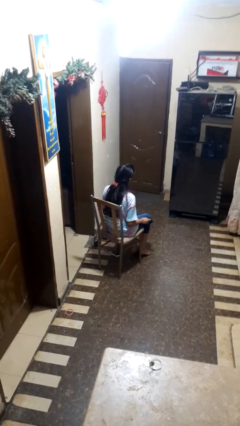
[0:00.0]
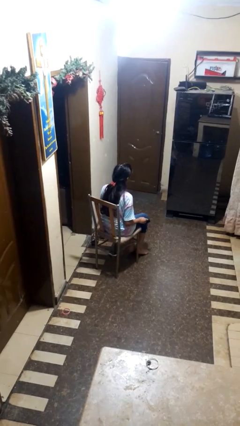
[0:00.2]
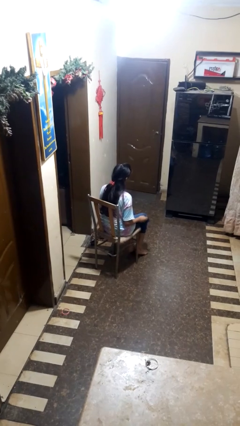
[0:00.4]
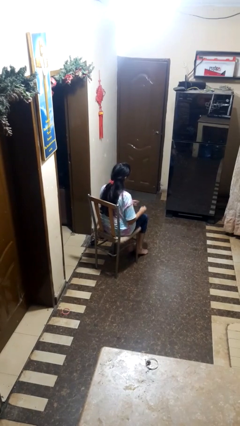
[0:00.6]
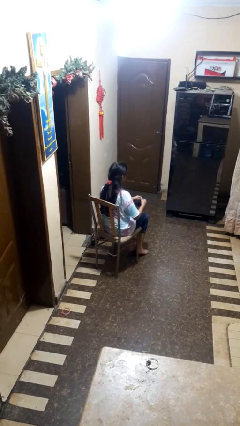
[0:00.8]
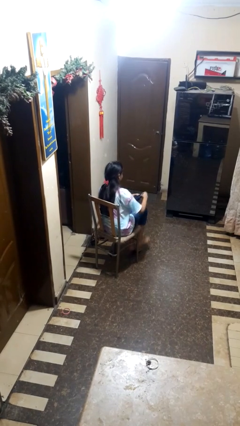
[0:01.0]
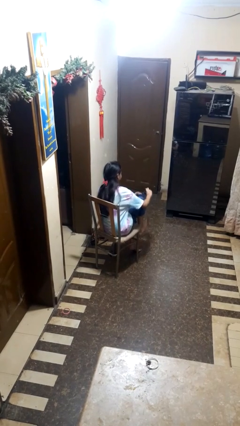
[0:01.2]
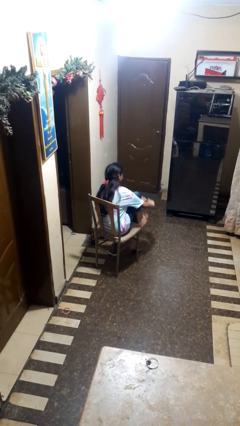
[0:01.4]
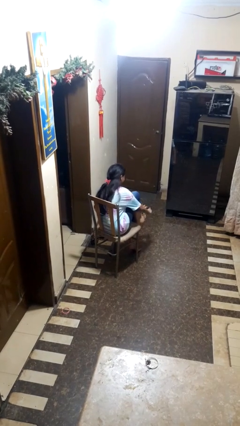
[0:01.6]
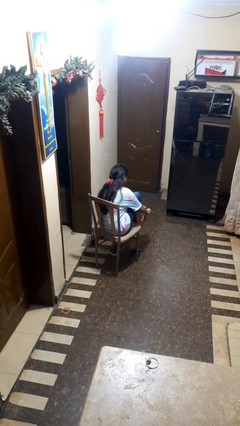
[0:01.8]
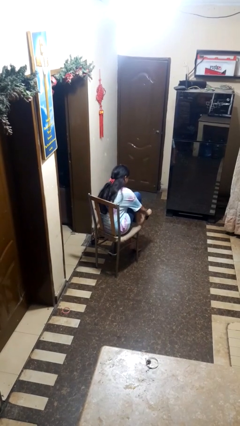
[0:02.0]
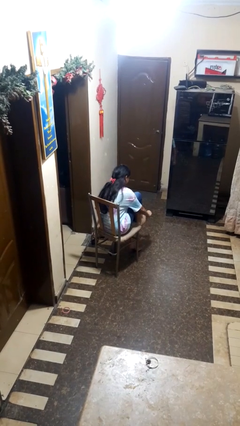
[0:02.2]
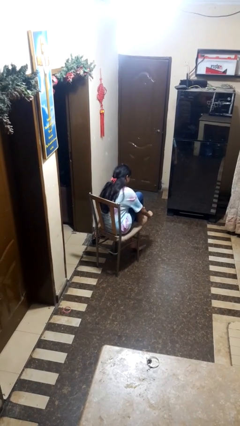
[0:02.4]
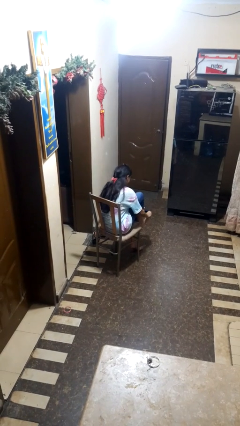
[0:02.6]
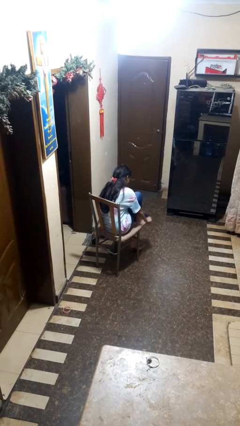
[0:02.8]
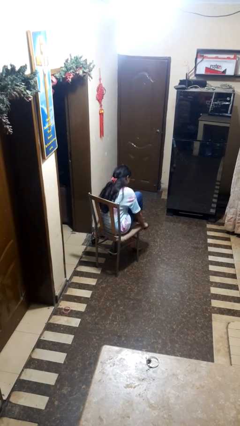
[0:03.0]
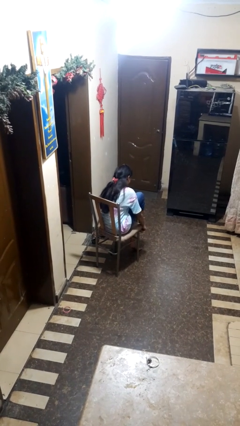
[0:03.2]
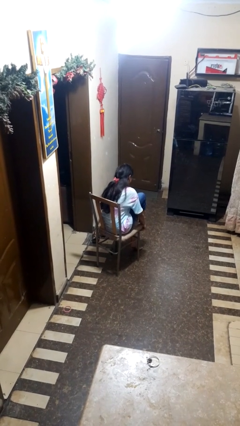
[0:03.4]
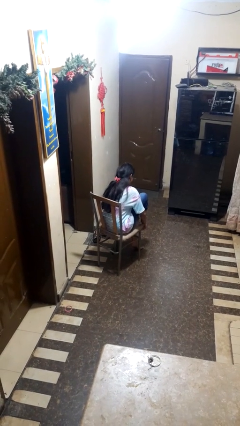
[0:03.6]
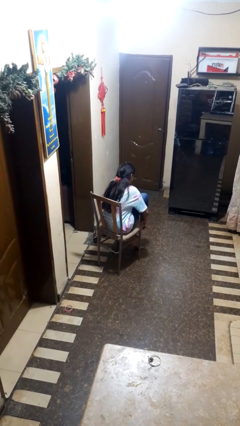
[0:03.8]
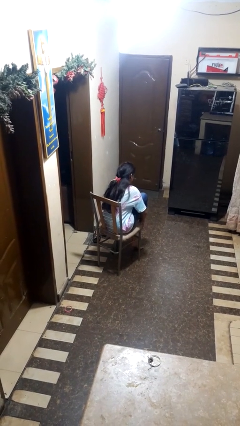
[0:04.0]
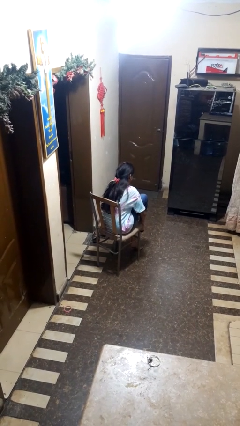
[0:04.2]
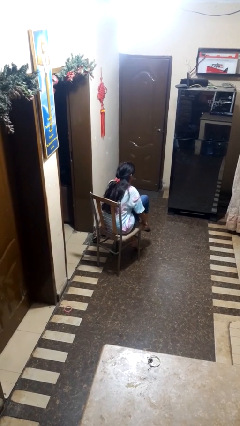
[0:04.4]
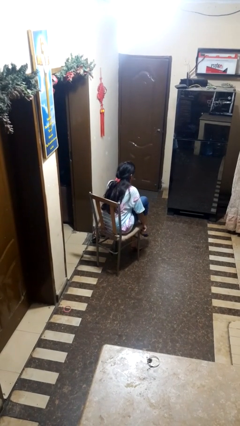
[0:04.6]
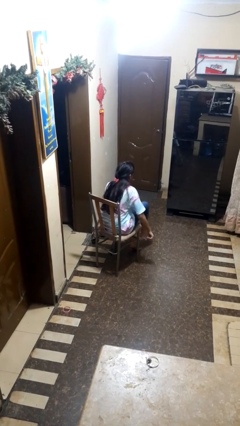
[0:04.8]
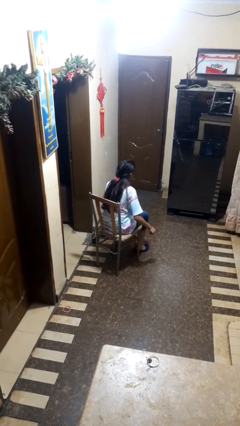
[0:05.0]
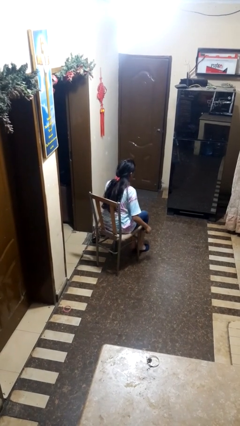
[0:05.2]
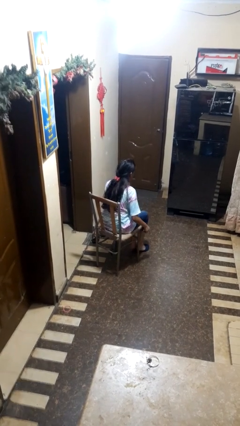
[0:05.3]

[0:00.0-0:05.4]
person puts on socks

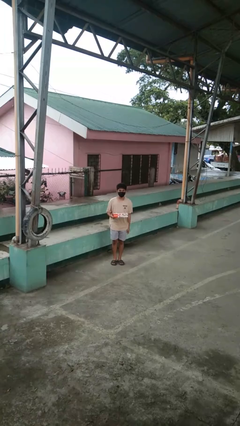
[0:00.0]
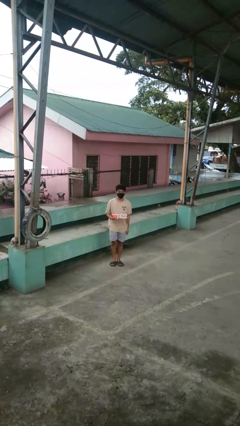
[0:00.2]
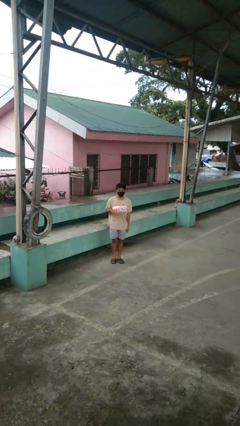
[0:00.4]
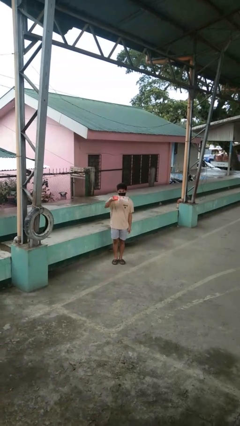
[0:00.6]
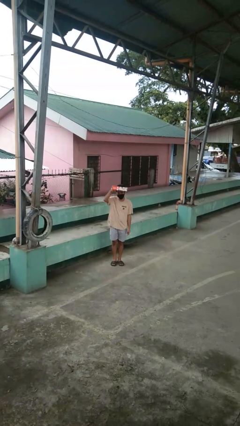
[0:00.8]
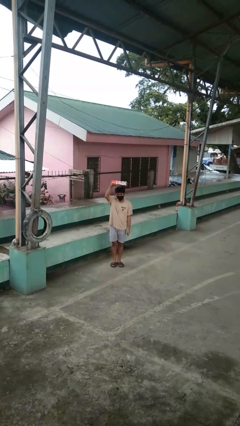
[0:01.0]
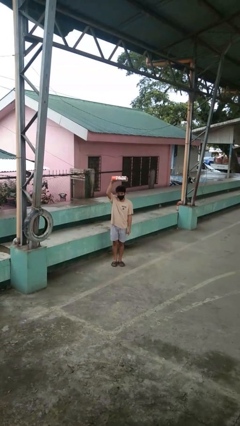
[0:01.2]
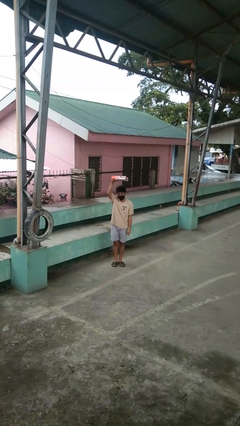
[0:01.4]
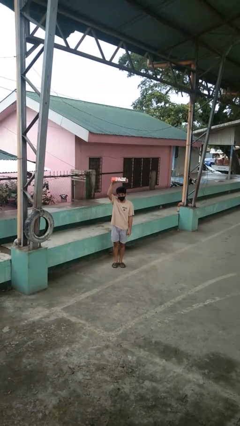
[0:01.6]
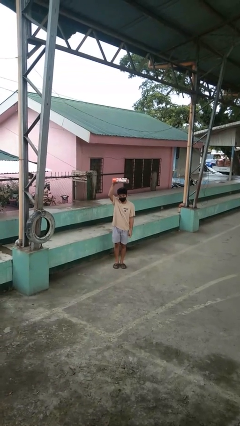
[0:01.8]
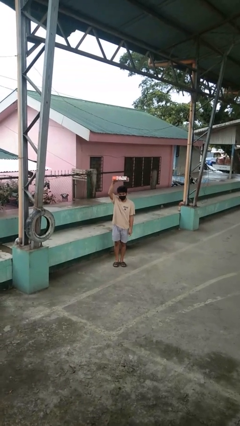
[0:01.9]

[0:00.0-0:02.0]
person holds object above head

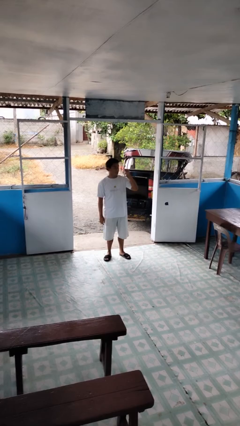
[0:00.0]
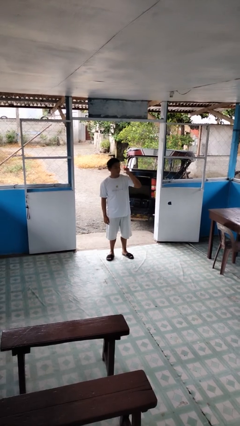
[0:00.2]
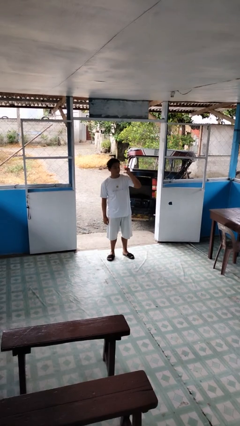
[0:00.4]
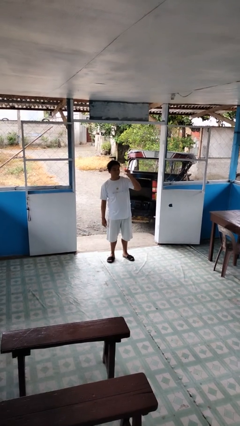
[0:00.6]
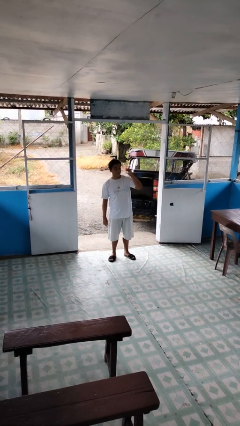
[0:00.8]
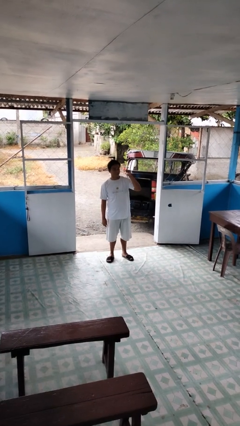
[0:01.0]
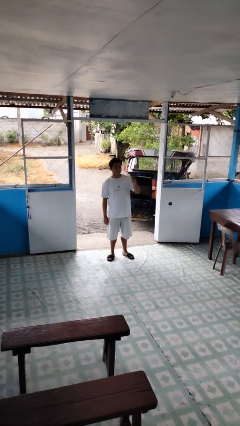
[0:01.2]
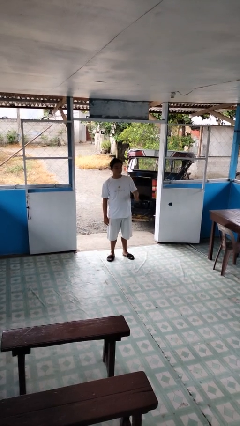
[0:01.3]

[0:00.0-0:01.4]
person gestures behind me

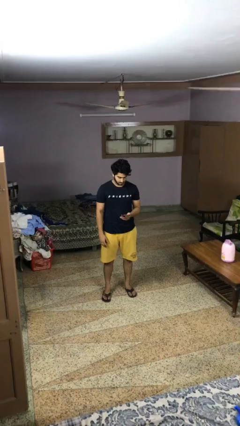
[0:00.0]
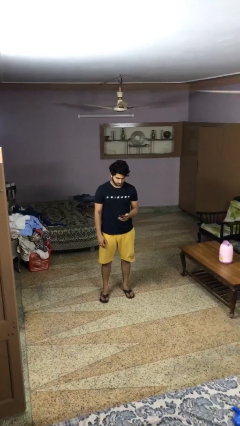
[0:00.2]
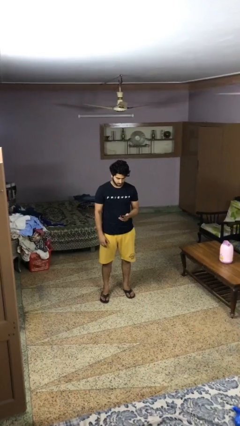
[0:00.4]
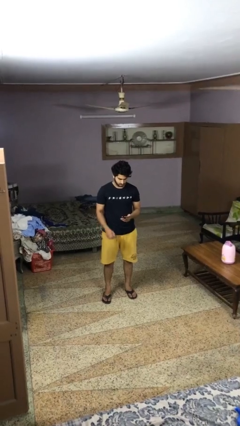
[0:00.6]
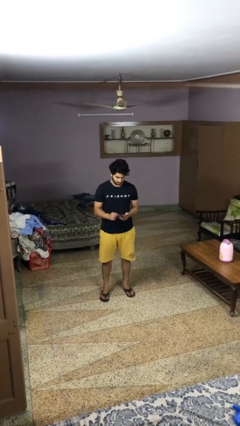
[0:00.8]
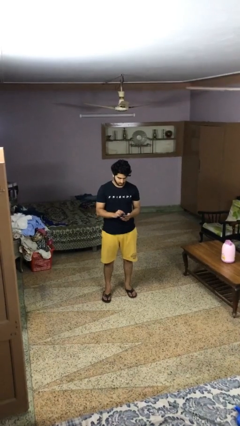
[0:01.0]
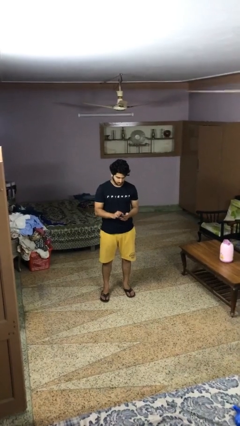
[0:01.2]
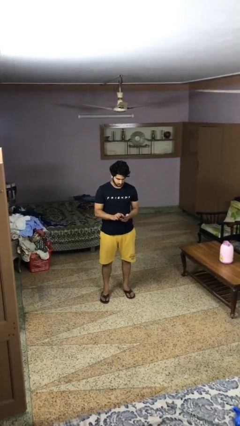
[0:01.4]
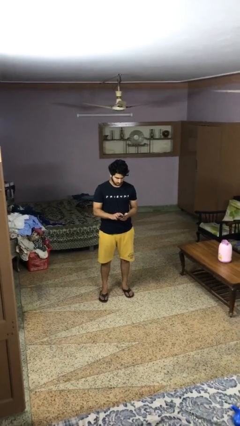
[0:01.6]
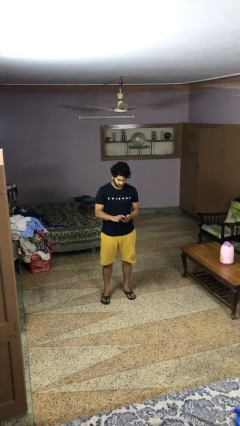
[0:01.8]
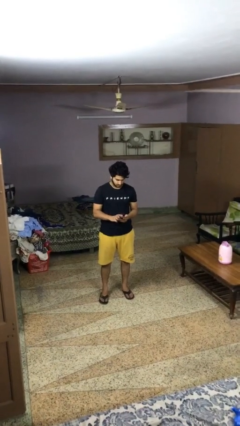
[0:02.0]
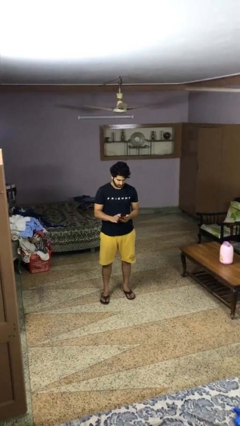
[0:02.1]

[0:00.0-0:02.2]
person gestures zoom in

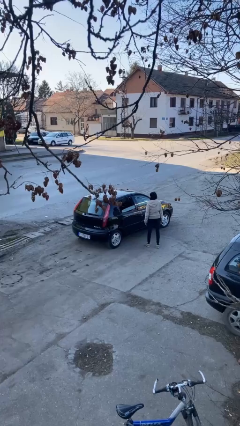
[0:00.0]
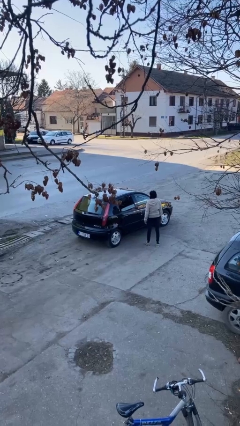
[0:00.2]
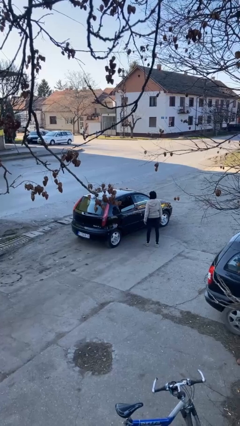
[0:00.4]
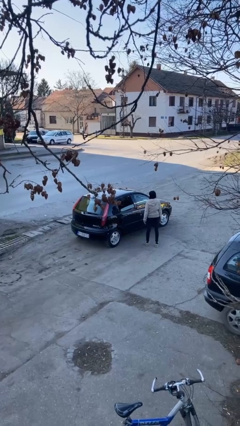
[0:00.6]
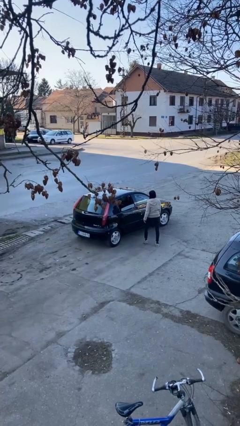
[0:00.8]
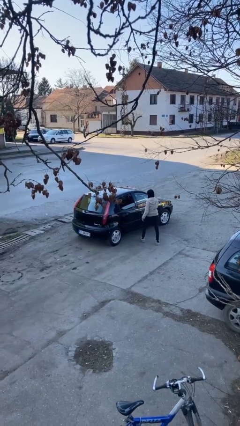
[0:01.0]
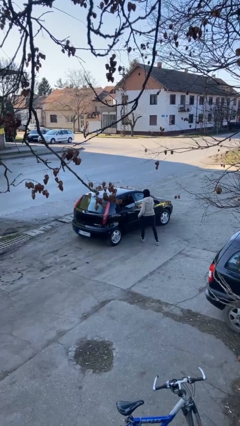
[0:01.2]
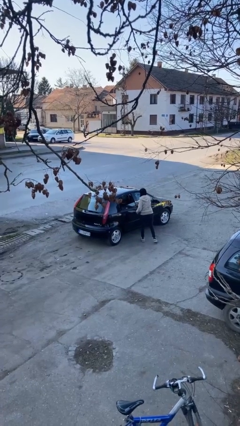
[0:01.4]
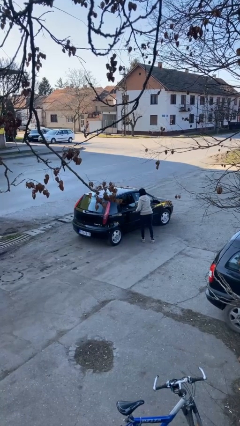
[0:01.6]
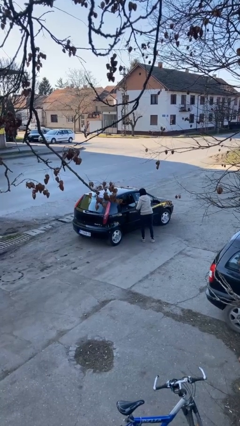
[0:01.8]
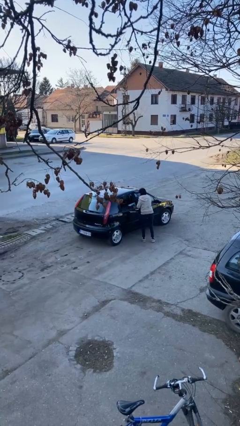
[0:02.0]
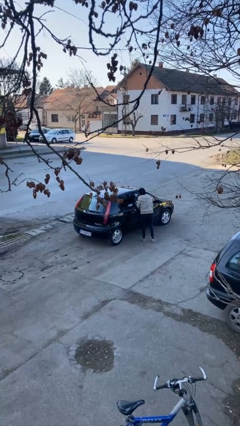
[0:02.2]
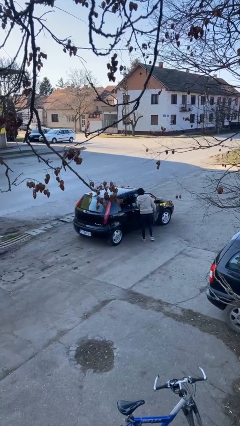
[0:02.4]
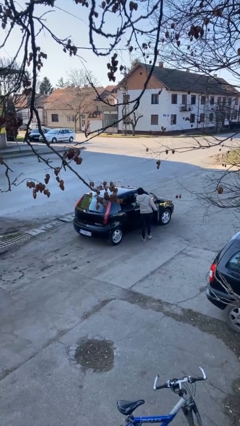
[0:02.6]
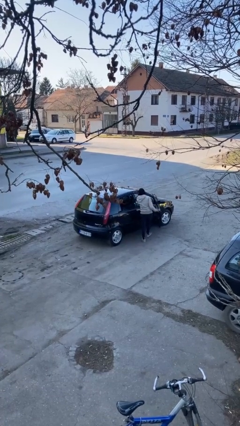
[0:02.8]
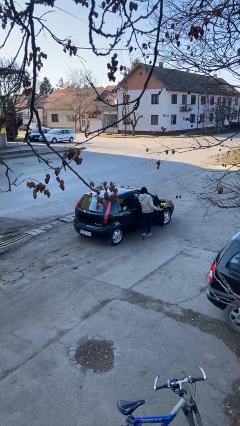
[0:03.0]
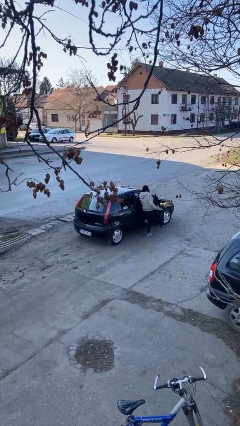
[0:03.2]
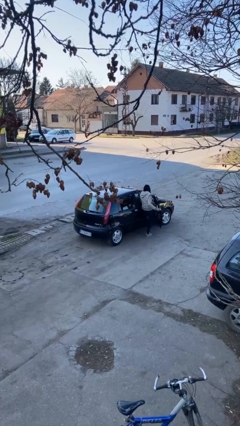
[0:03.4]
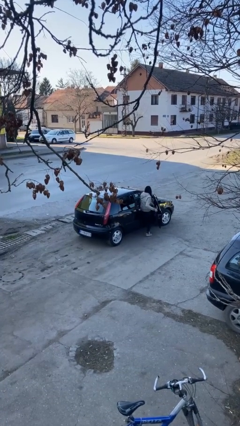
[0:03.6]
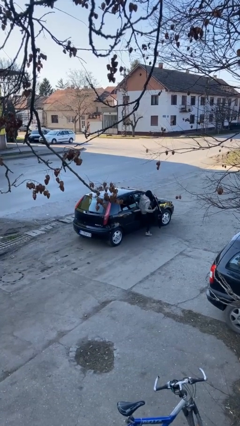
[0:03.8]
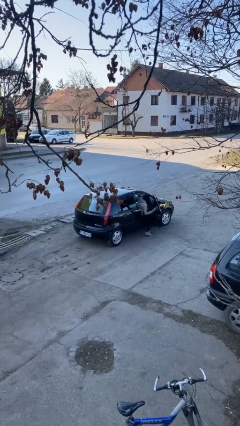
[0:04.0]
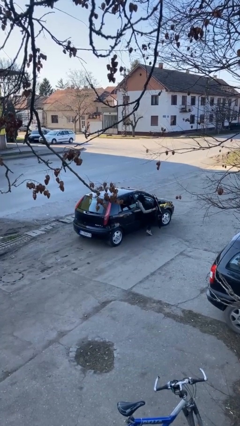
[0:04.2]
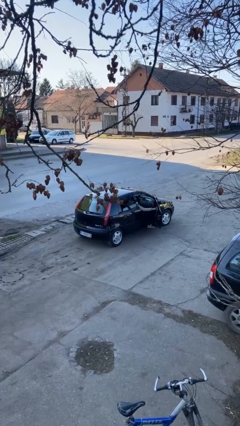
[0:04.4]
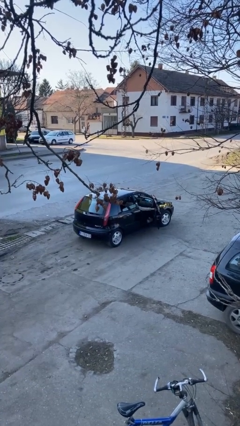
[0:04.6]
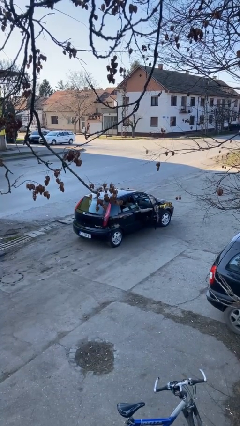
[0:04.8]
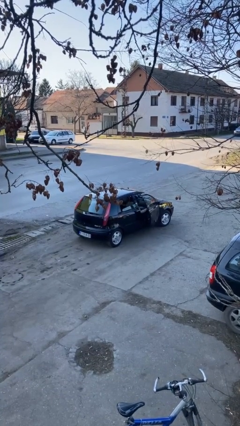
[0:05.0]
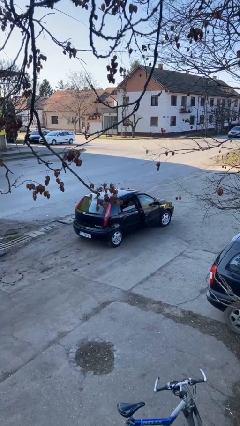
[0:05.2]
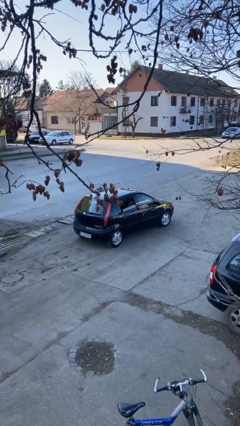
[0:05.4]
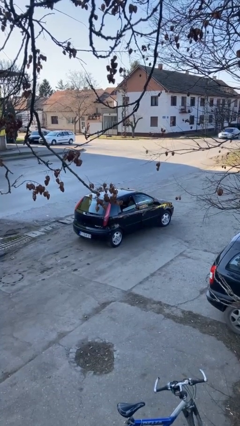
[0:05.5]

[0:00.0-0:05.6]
car picks up person

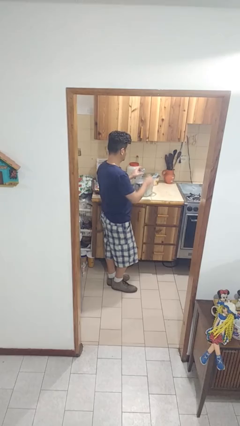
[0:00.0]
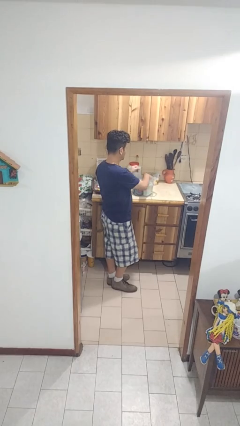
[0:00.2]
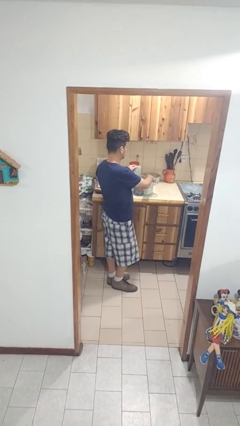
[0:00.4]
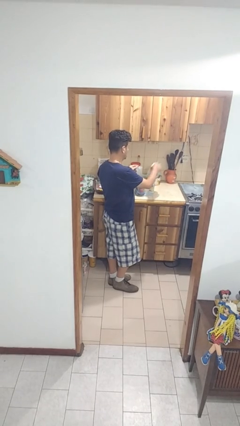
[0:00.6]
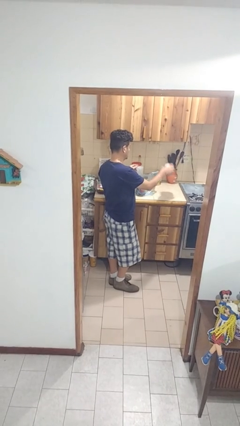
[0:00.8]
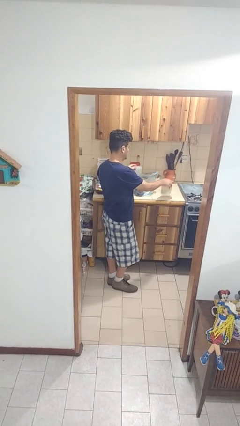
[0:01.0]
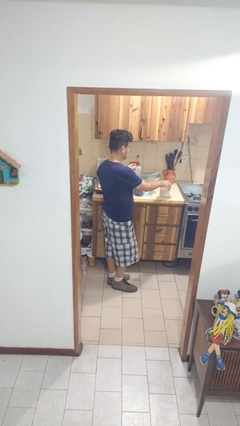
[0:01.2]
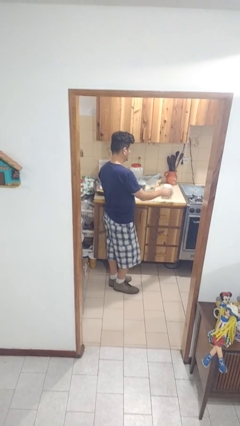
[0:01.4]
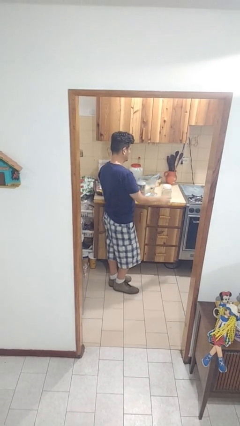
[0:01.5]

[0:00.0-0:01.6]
person takes object from bag
